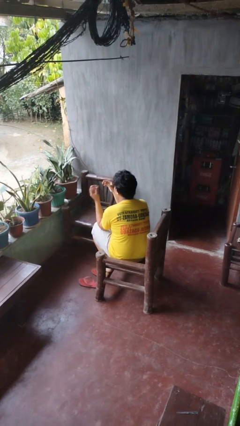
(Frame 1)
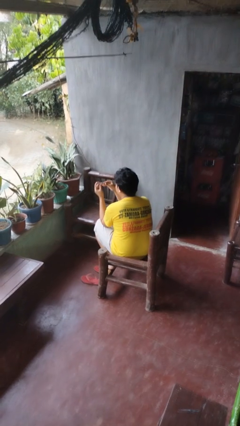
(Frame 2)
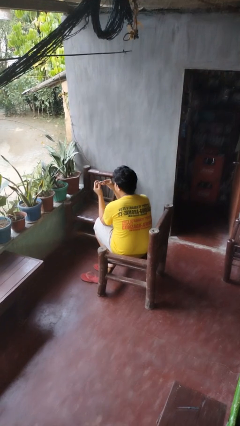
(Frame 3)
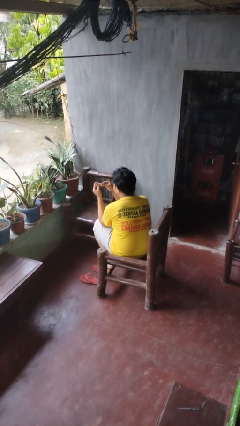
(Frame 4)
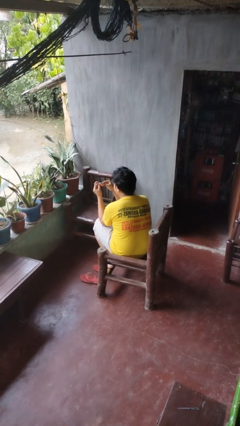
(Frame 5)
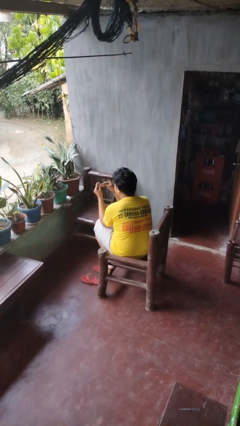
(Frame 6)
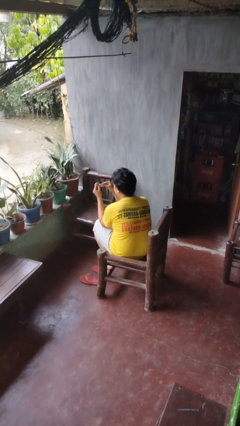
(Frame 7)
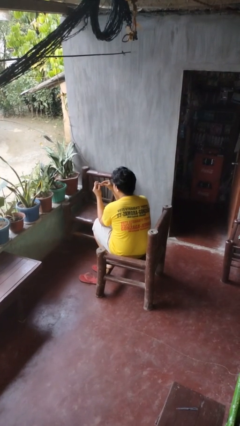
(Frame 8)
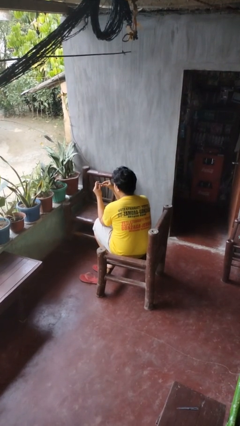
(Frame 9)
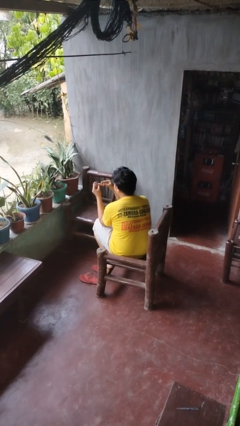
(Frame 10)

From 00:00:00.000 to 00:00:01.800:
person clips fingernails

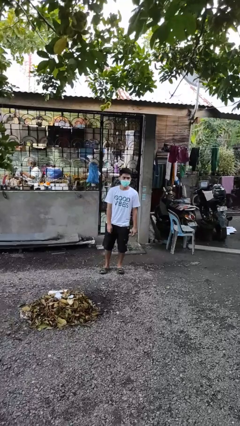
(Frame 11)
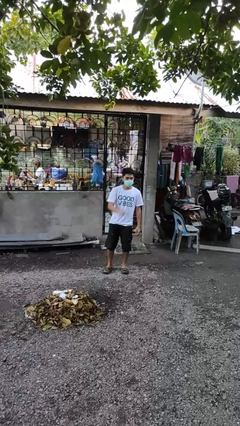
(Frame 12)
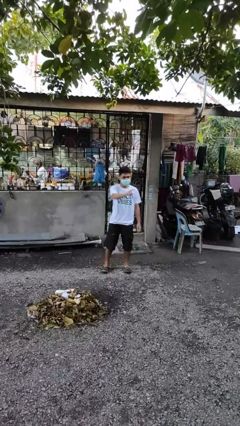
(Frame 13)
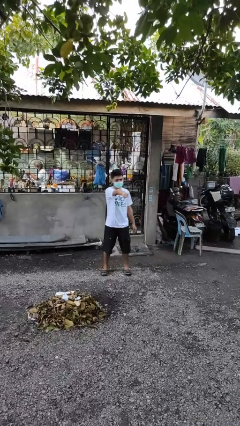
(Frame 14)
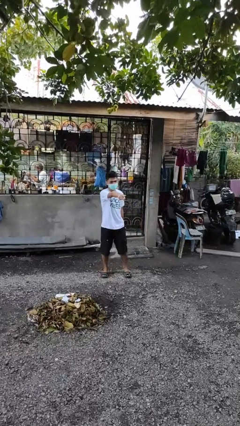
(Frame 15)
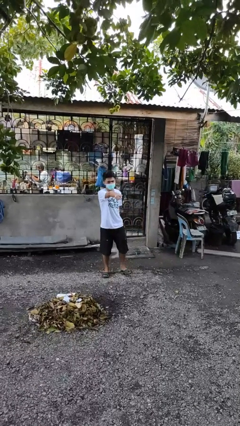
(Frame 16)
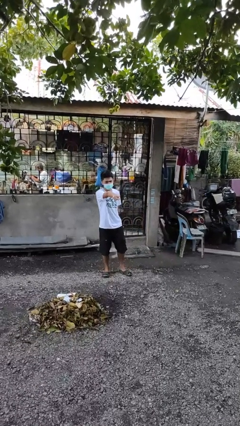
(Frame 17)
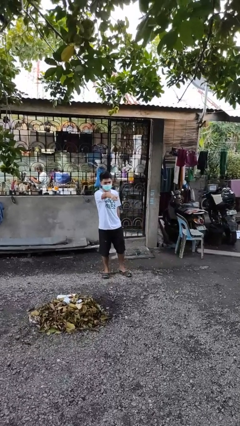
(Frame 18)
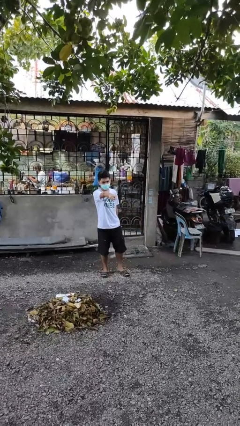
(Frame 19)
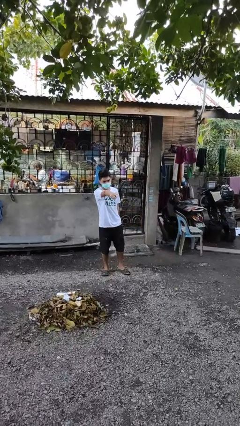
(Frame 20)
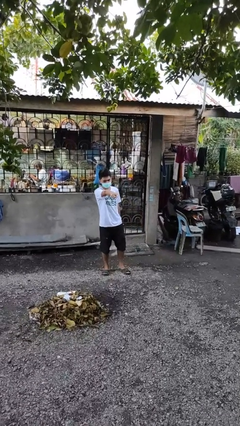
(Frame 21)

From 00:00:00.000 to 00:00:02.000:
person points at person

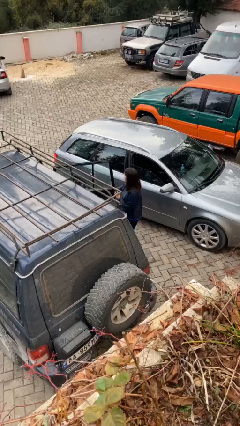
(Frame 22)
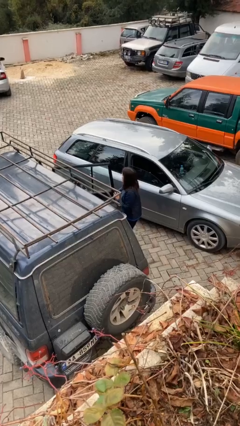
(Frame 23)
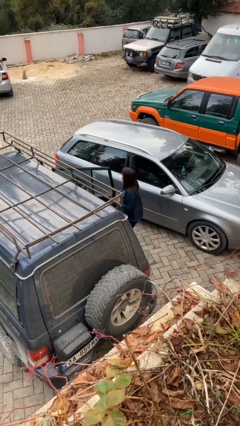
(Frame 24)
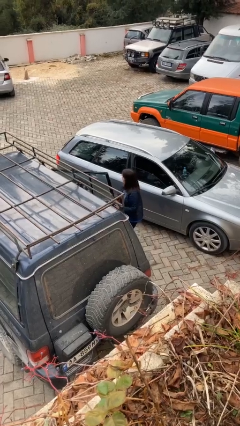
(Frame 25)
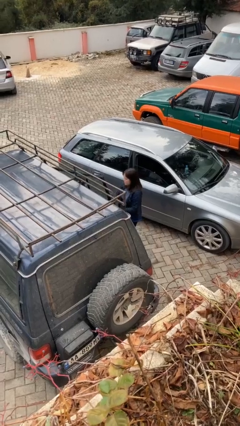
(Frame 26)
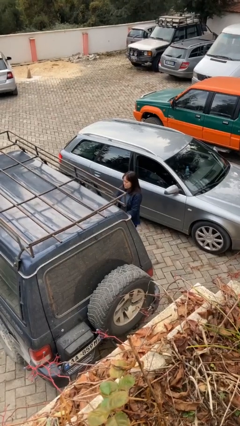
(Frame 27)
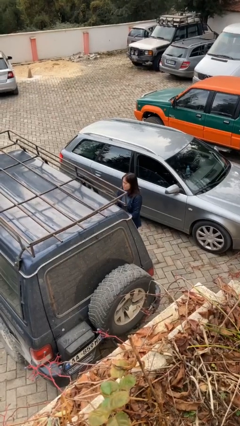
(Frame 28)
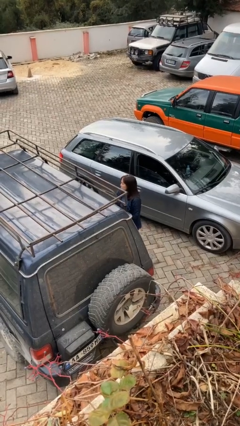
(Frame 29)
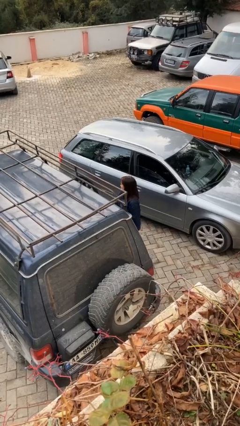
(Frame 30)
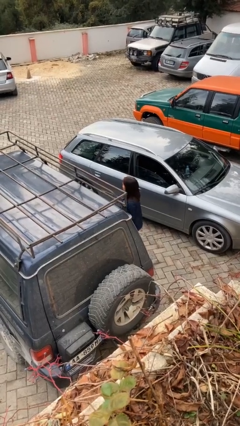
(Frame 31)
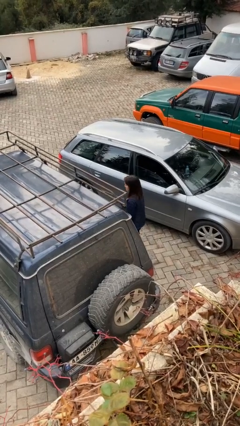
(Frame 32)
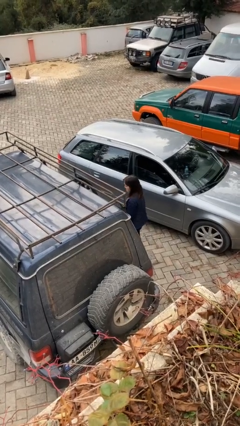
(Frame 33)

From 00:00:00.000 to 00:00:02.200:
person closes car door

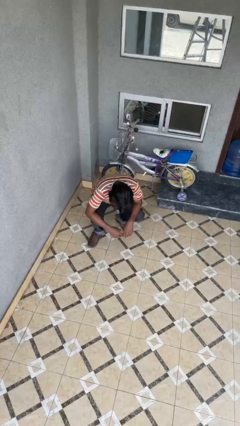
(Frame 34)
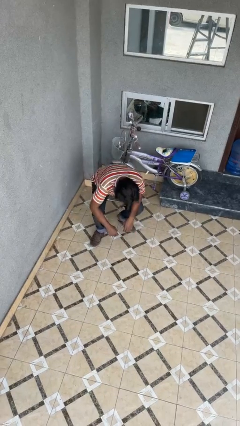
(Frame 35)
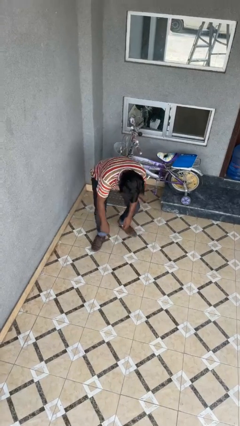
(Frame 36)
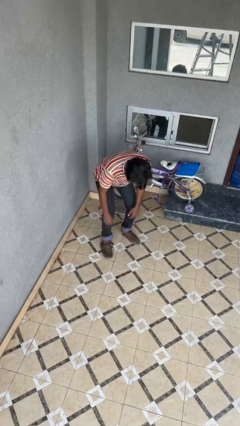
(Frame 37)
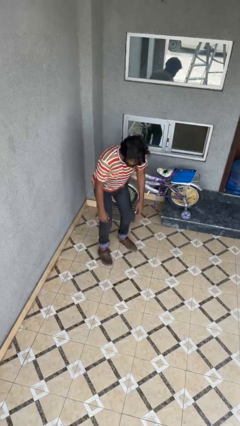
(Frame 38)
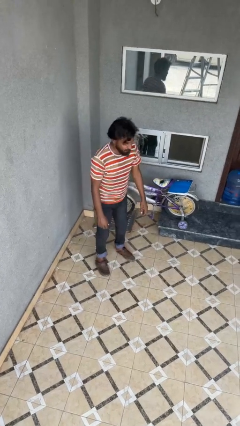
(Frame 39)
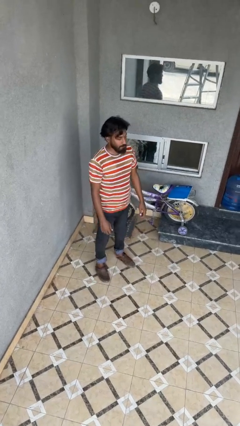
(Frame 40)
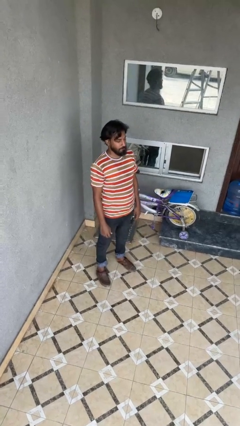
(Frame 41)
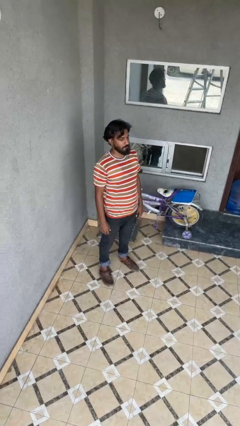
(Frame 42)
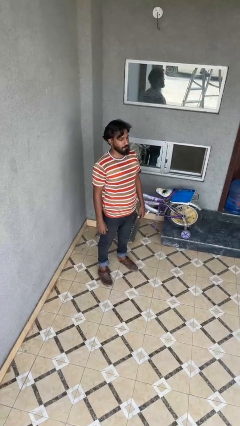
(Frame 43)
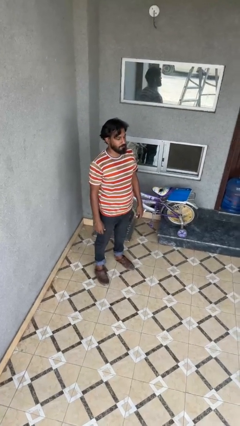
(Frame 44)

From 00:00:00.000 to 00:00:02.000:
person stands up

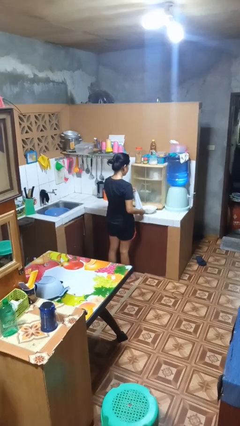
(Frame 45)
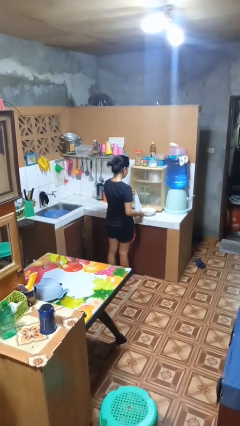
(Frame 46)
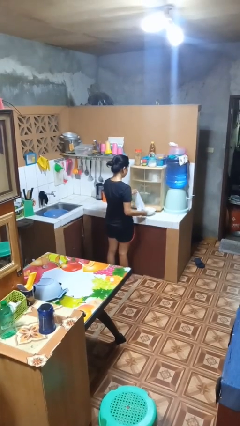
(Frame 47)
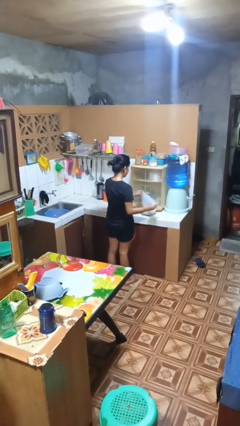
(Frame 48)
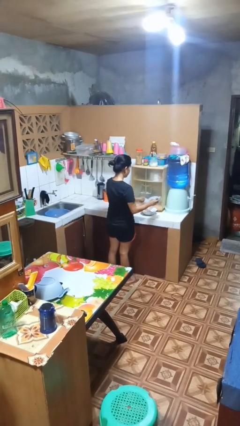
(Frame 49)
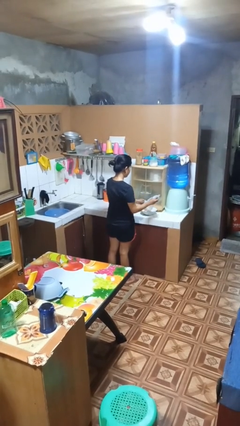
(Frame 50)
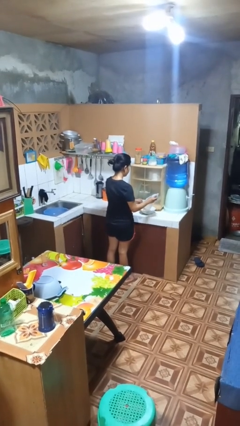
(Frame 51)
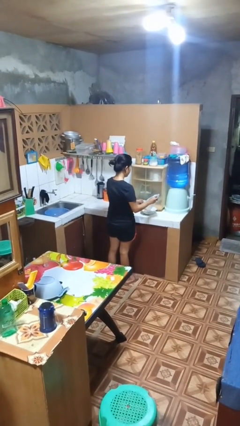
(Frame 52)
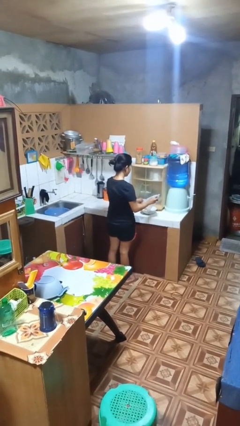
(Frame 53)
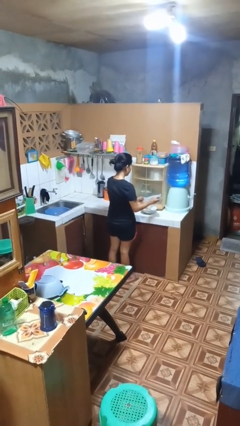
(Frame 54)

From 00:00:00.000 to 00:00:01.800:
person pours into bowl

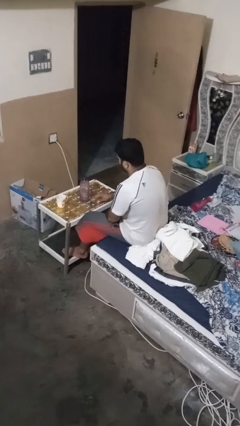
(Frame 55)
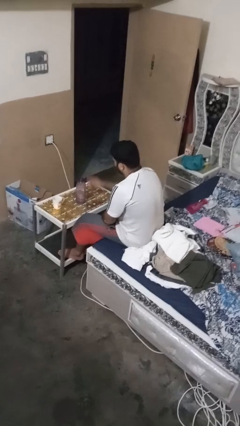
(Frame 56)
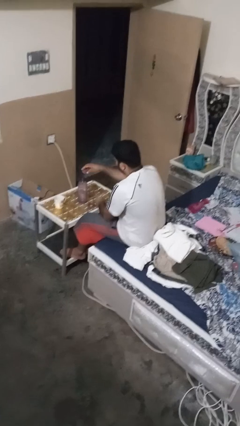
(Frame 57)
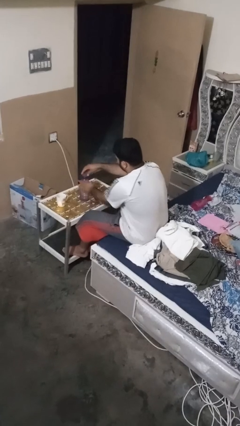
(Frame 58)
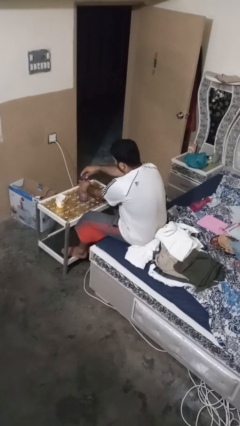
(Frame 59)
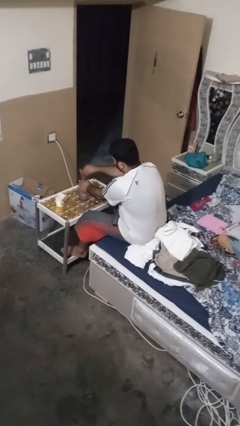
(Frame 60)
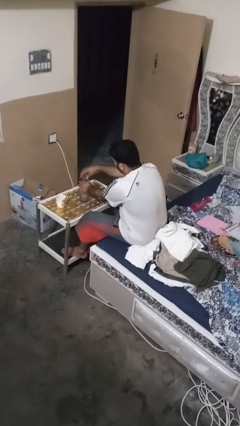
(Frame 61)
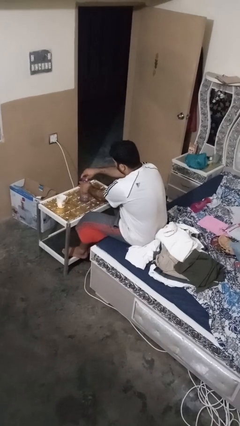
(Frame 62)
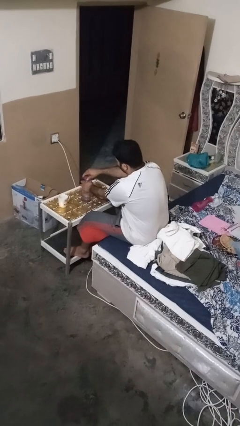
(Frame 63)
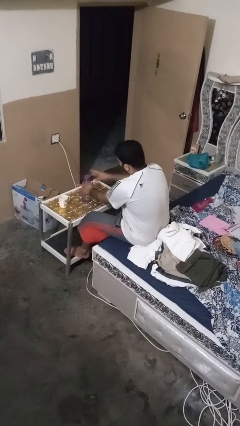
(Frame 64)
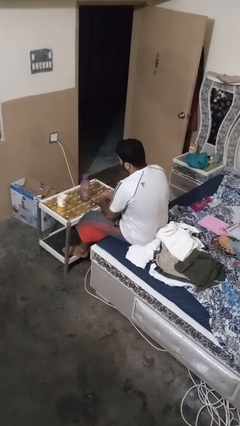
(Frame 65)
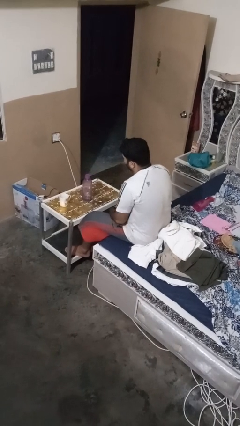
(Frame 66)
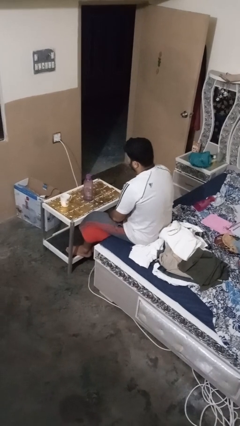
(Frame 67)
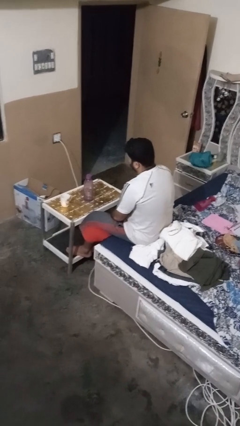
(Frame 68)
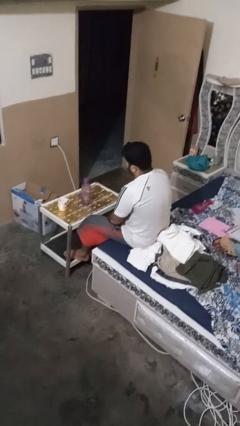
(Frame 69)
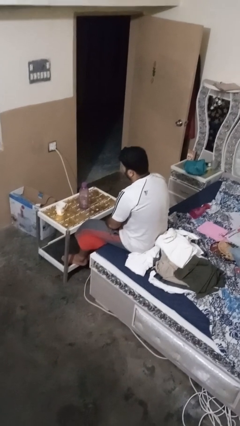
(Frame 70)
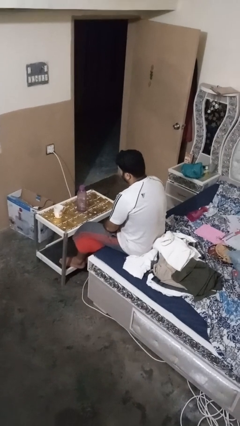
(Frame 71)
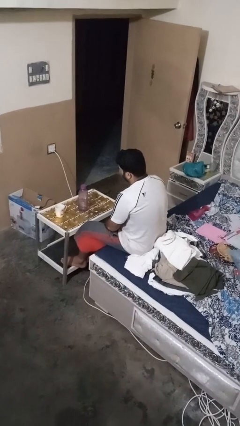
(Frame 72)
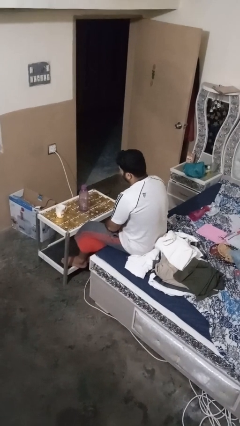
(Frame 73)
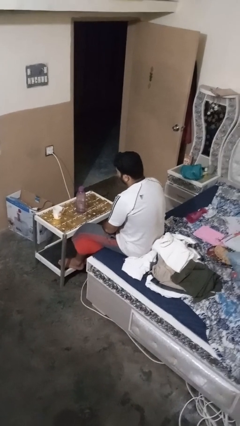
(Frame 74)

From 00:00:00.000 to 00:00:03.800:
person screws lid to bottle

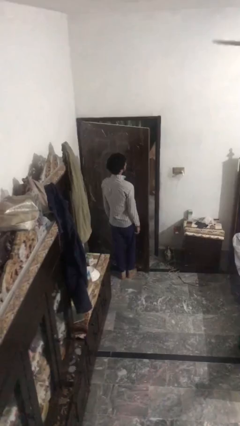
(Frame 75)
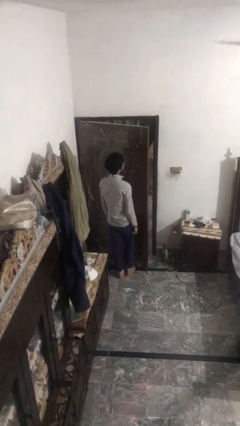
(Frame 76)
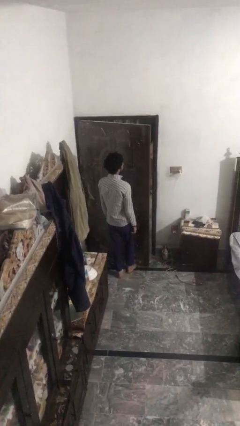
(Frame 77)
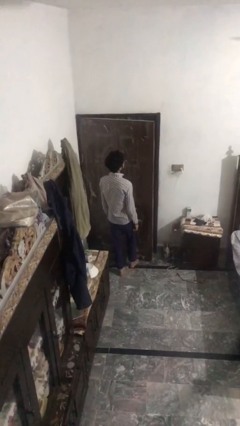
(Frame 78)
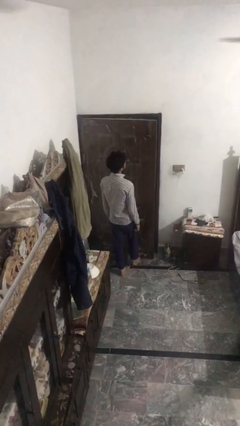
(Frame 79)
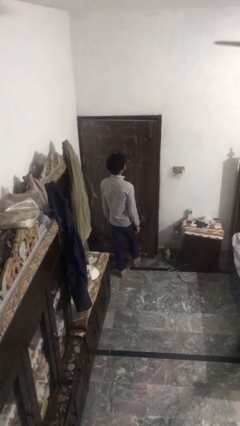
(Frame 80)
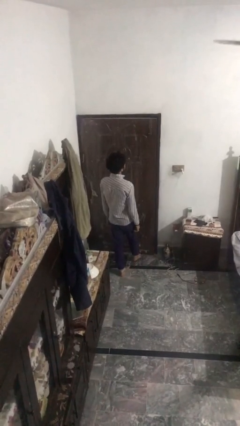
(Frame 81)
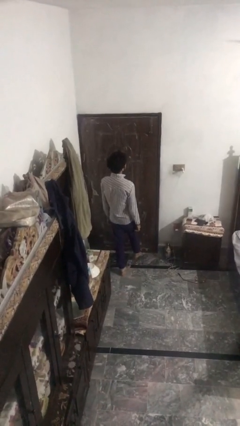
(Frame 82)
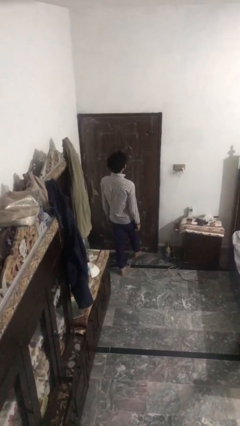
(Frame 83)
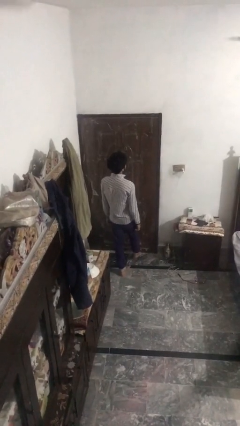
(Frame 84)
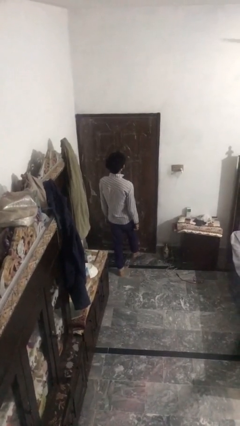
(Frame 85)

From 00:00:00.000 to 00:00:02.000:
person closes door with foot

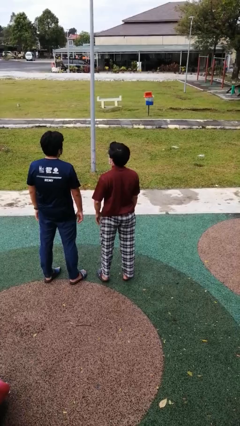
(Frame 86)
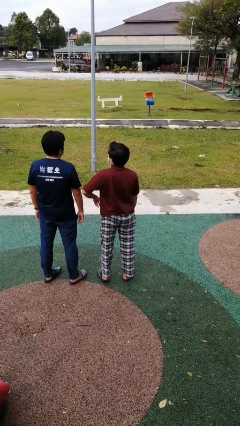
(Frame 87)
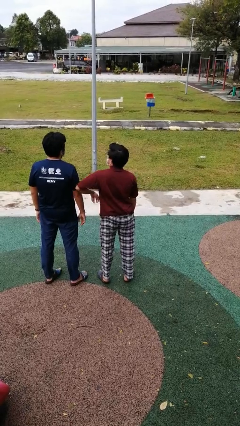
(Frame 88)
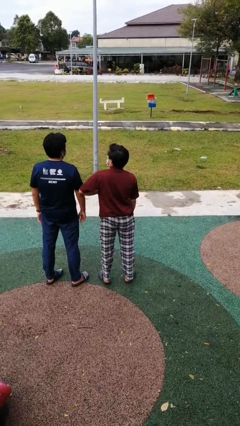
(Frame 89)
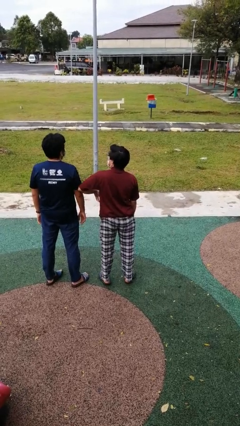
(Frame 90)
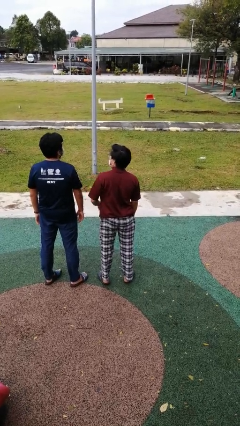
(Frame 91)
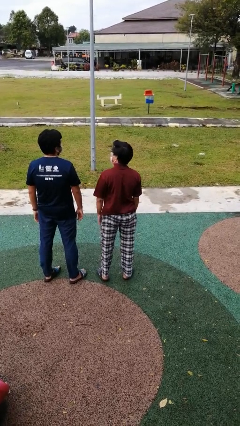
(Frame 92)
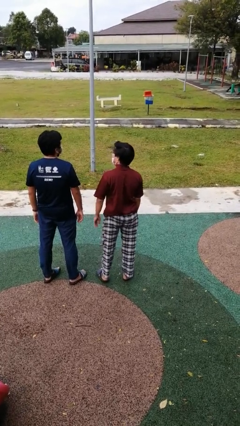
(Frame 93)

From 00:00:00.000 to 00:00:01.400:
person nudges person with elbow

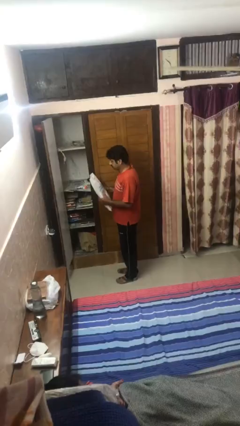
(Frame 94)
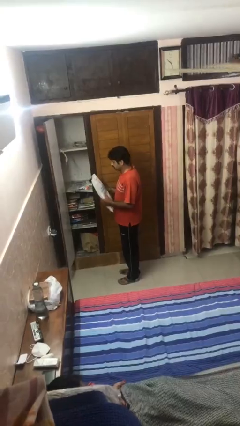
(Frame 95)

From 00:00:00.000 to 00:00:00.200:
person puts down object on shelf
